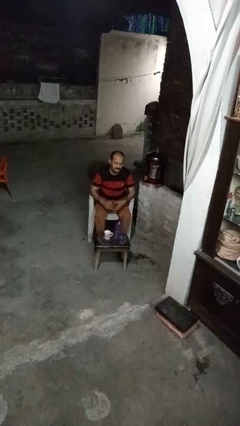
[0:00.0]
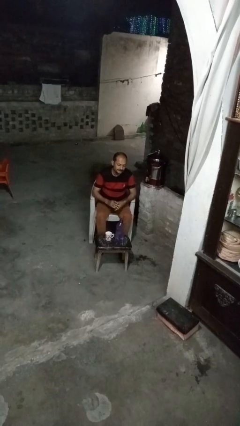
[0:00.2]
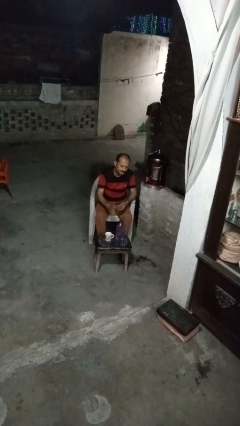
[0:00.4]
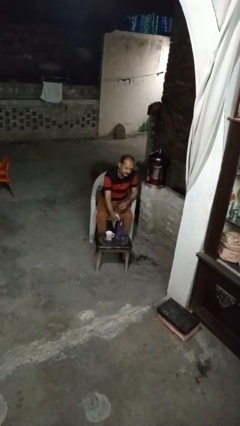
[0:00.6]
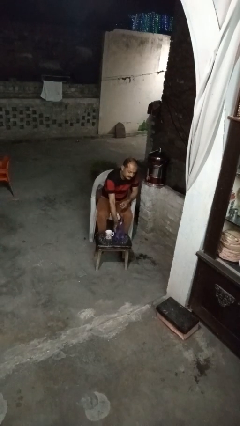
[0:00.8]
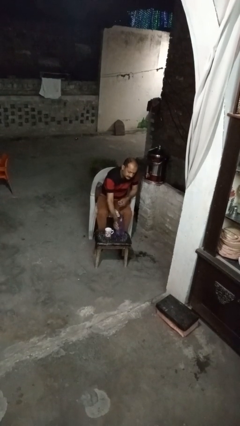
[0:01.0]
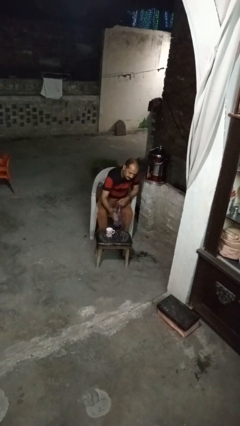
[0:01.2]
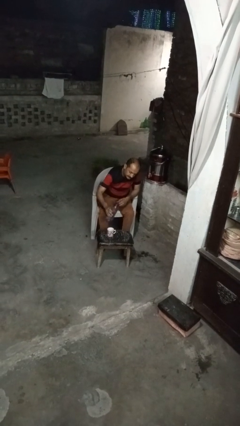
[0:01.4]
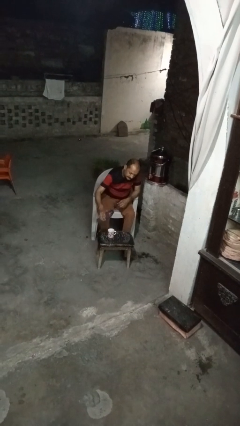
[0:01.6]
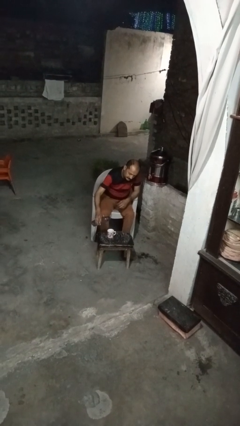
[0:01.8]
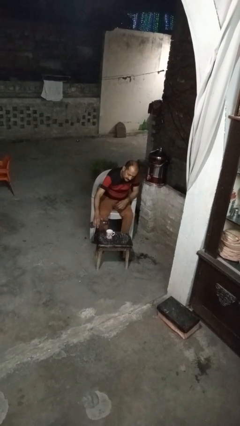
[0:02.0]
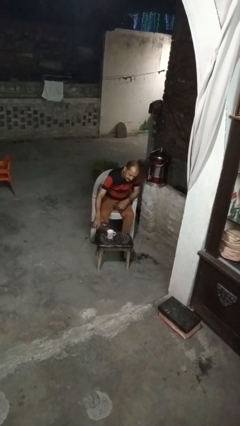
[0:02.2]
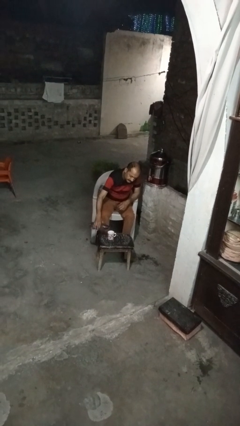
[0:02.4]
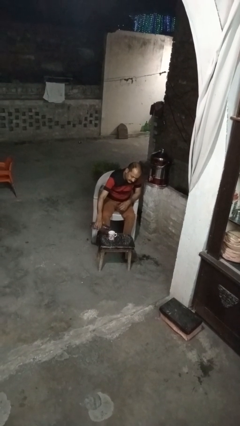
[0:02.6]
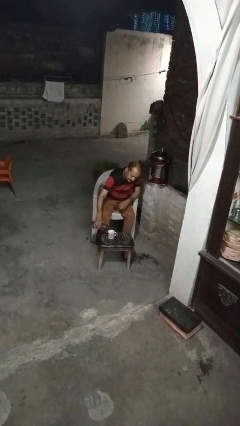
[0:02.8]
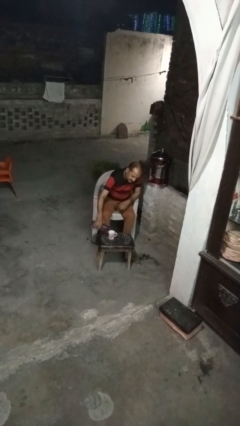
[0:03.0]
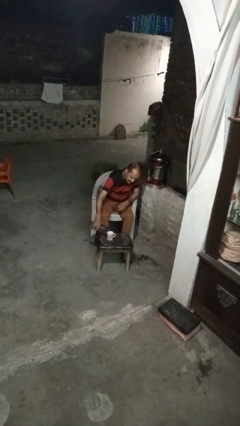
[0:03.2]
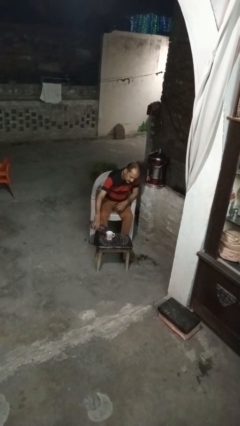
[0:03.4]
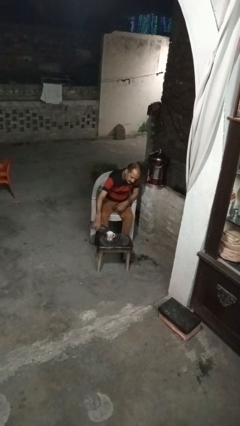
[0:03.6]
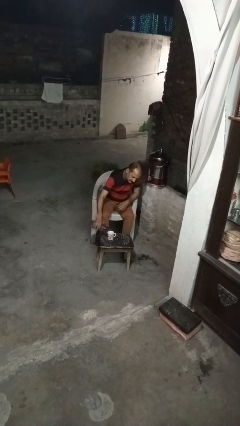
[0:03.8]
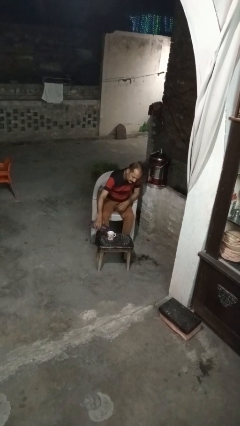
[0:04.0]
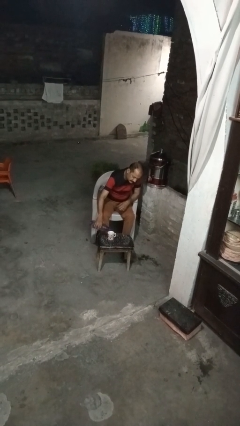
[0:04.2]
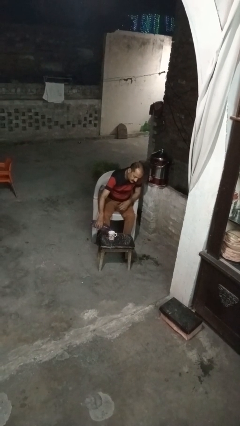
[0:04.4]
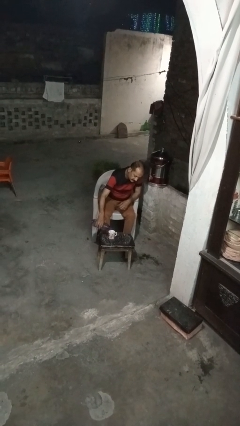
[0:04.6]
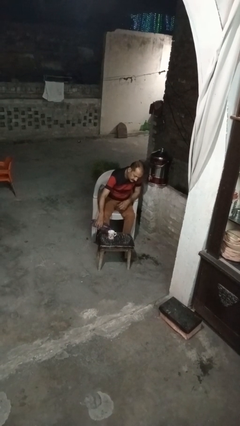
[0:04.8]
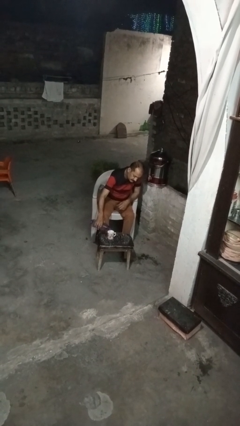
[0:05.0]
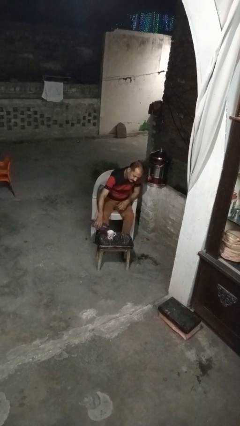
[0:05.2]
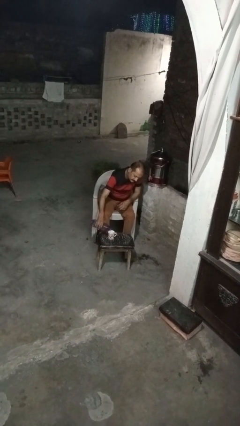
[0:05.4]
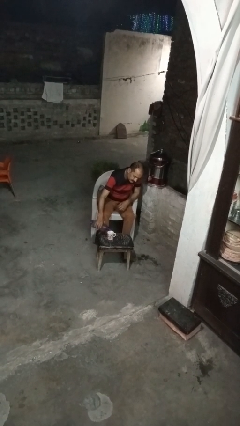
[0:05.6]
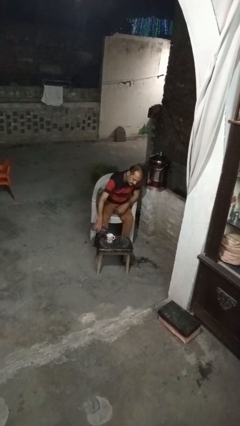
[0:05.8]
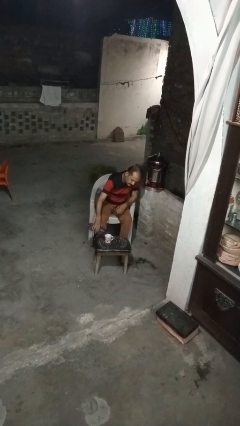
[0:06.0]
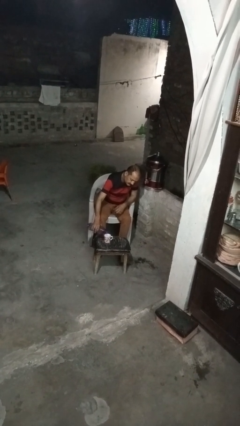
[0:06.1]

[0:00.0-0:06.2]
person pours liquid into cup

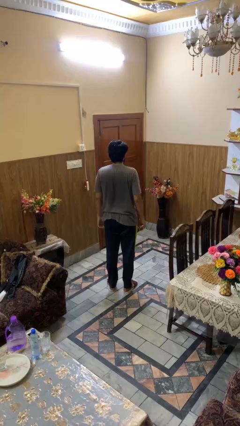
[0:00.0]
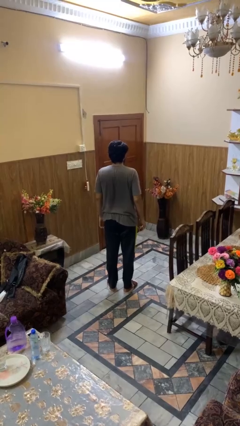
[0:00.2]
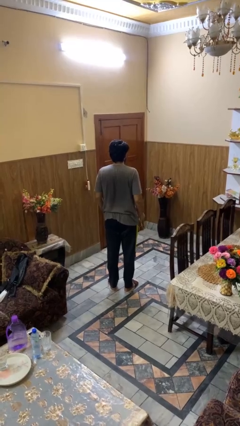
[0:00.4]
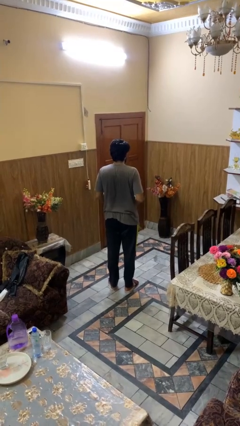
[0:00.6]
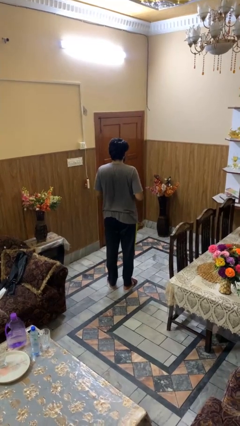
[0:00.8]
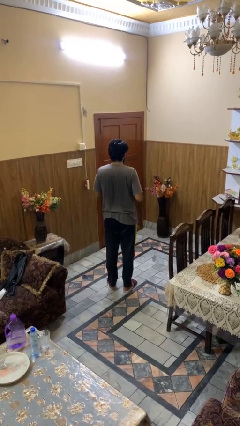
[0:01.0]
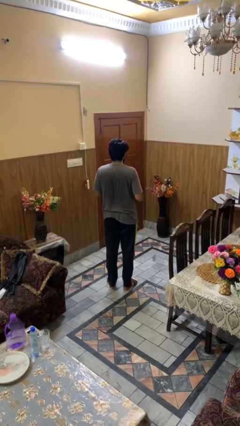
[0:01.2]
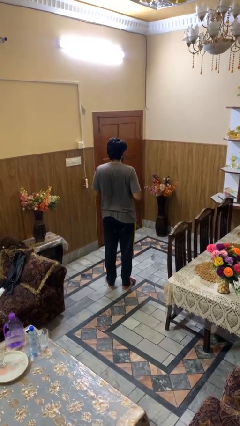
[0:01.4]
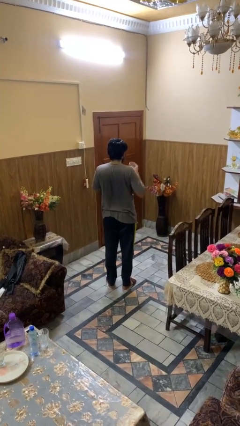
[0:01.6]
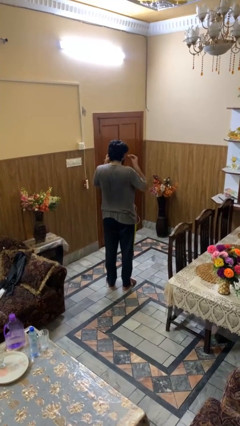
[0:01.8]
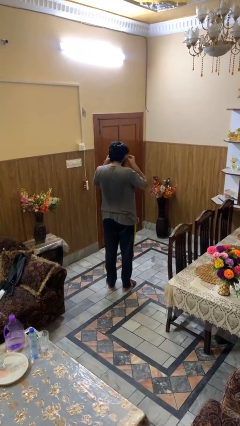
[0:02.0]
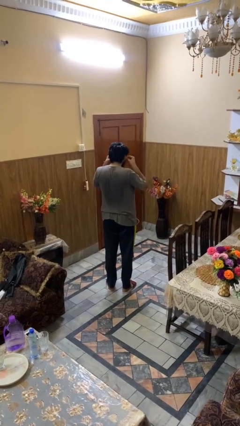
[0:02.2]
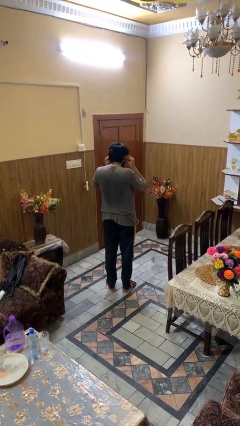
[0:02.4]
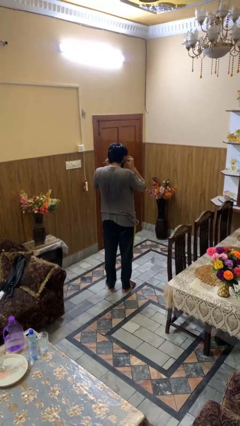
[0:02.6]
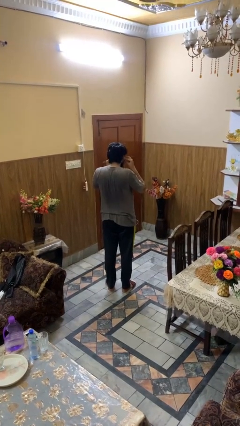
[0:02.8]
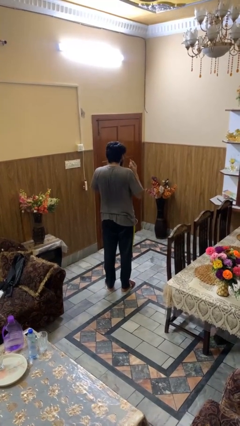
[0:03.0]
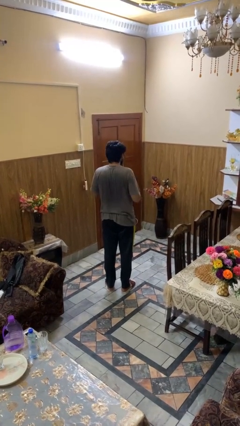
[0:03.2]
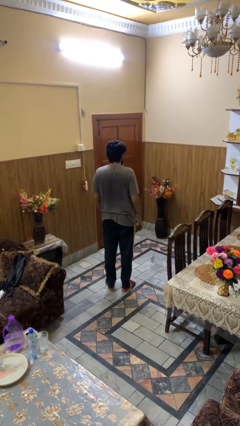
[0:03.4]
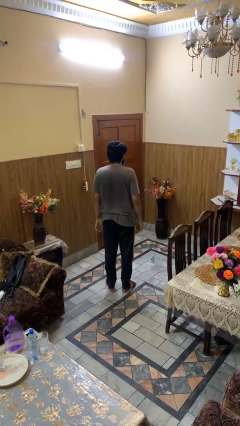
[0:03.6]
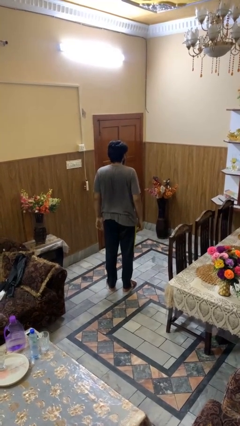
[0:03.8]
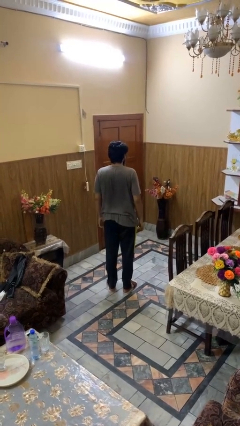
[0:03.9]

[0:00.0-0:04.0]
person puts on headphones

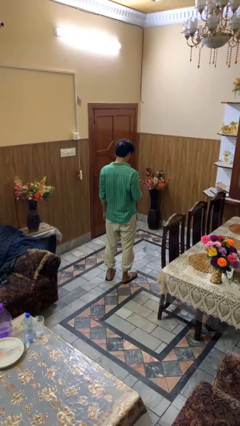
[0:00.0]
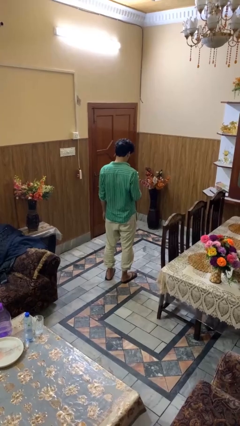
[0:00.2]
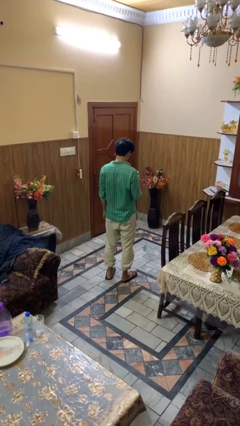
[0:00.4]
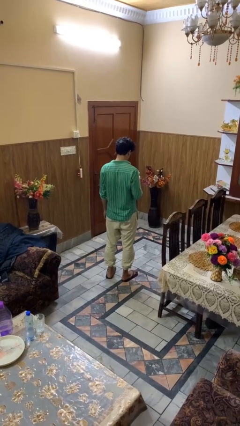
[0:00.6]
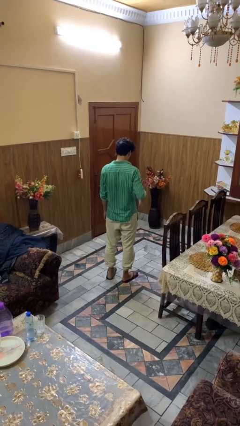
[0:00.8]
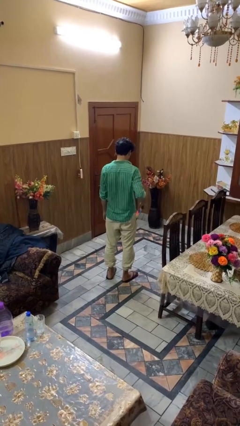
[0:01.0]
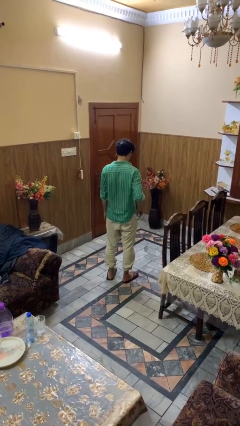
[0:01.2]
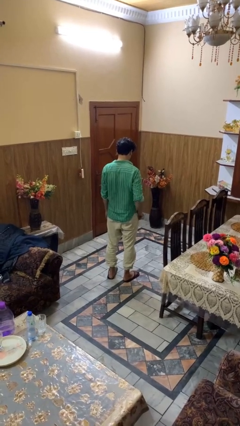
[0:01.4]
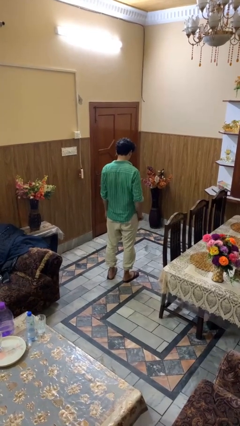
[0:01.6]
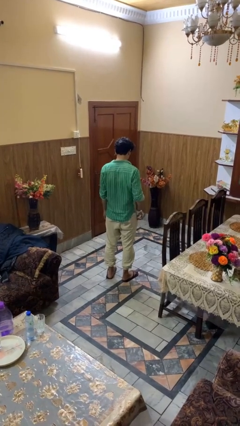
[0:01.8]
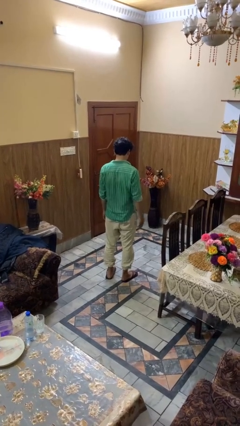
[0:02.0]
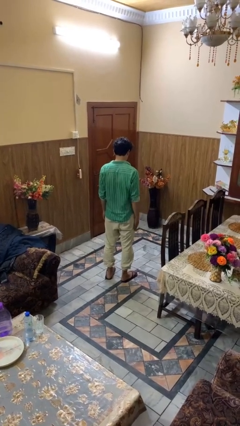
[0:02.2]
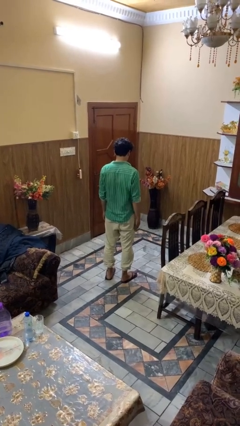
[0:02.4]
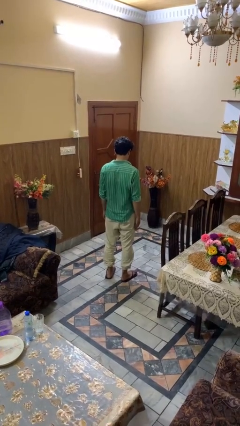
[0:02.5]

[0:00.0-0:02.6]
person puts phone into pocket

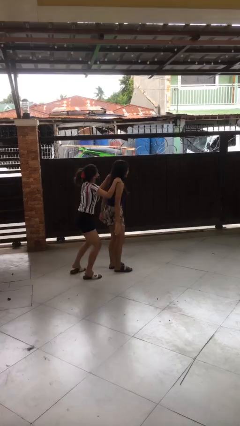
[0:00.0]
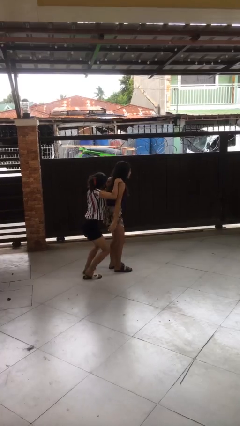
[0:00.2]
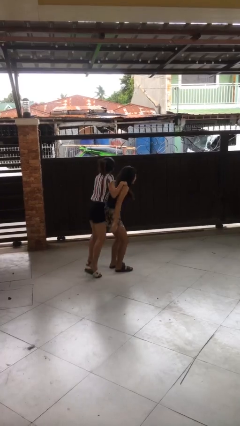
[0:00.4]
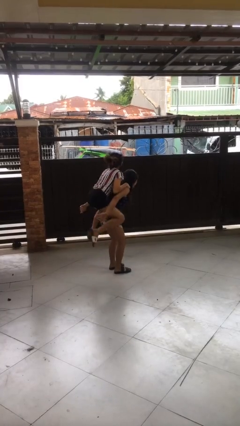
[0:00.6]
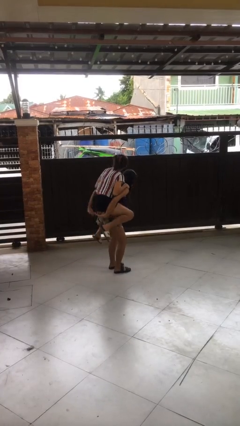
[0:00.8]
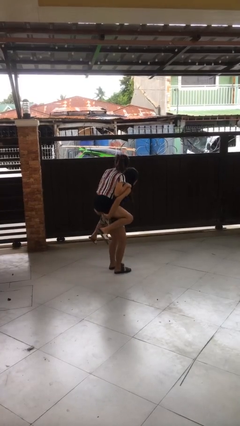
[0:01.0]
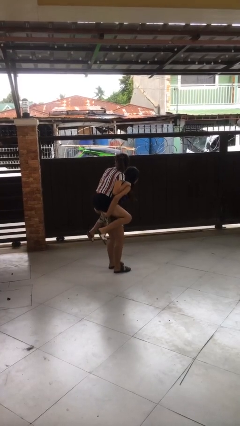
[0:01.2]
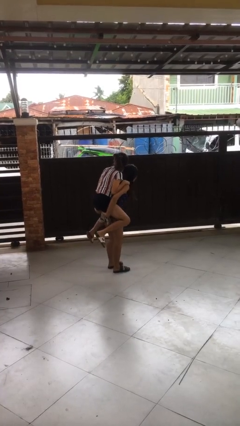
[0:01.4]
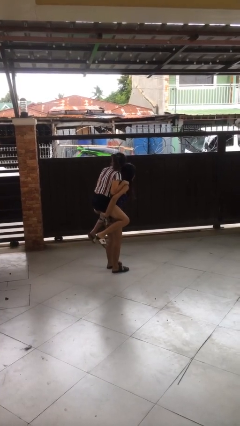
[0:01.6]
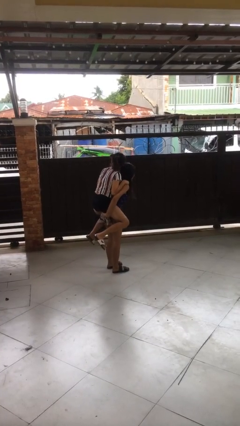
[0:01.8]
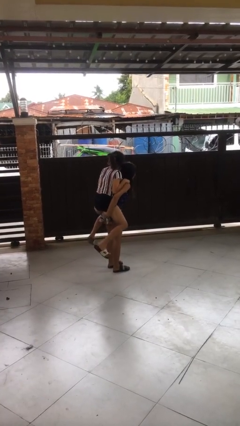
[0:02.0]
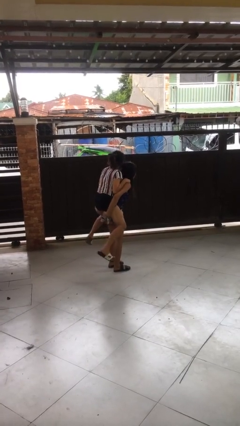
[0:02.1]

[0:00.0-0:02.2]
person carries person over shoulder

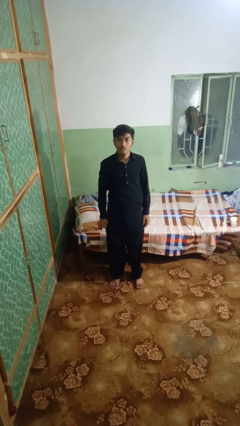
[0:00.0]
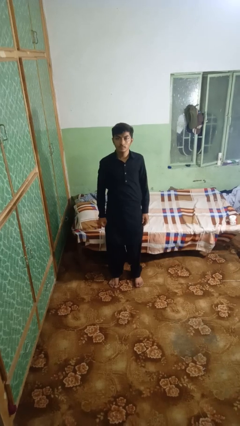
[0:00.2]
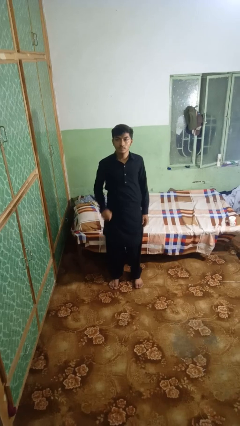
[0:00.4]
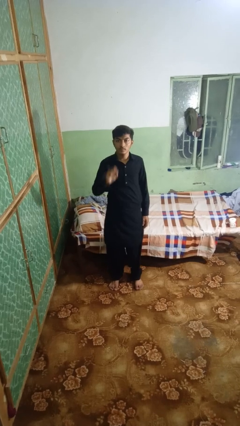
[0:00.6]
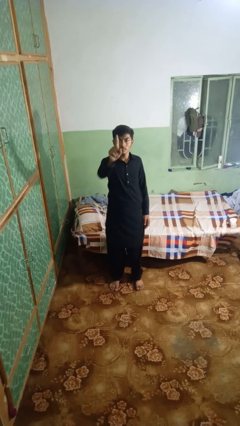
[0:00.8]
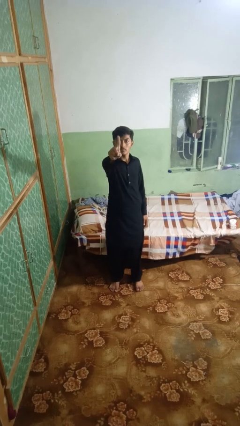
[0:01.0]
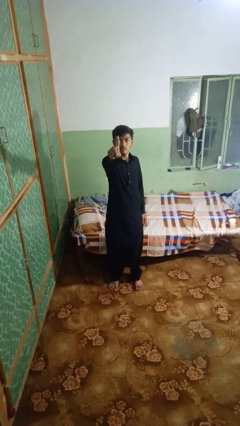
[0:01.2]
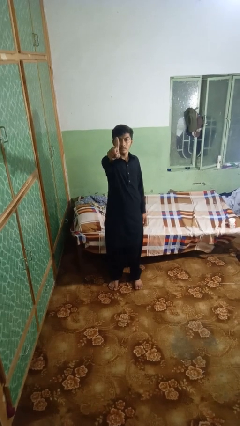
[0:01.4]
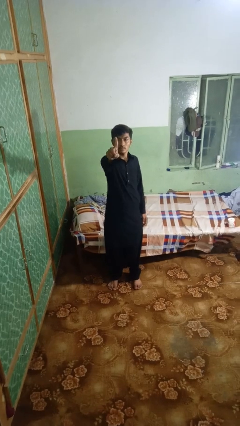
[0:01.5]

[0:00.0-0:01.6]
person gestures number one

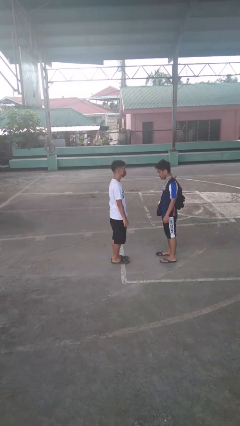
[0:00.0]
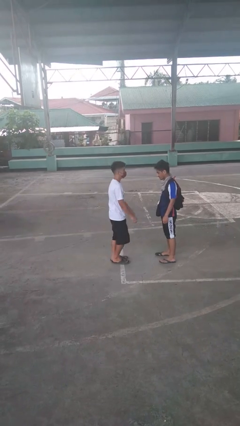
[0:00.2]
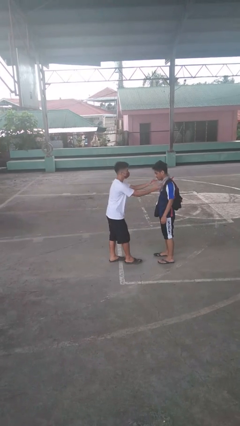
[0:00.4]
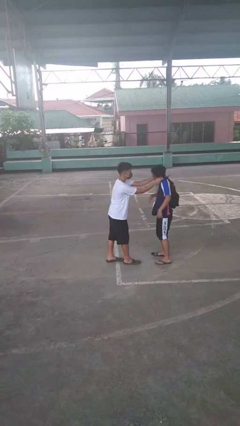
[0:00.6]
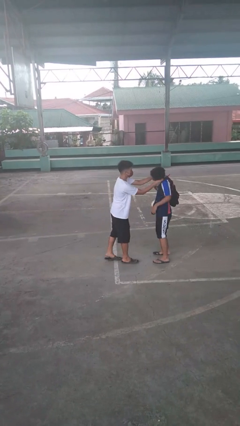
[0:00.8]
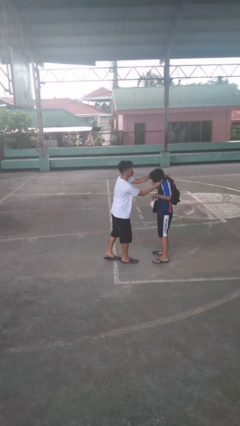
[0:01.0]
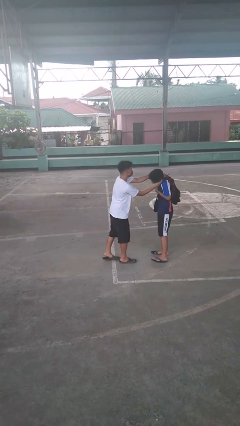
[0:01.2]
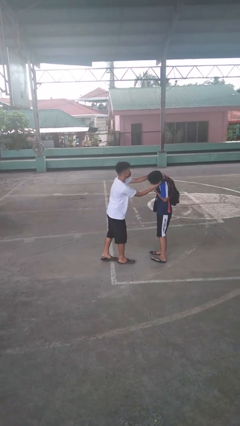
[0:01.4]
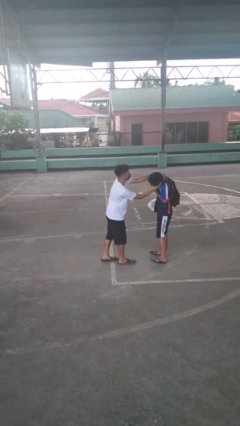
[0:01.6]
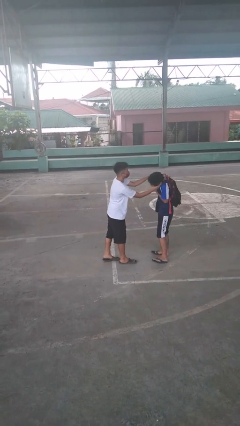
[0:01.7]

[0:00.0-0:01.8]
person tickles person
